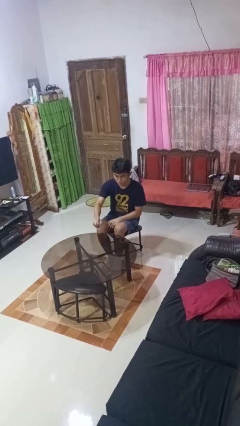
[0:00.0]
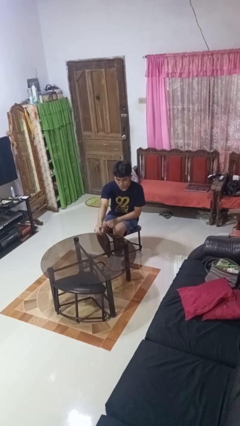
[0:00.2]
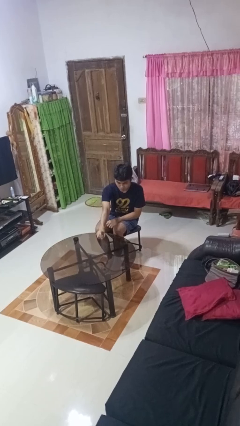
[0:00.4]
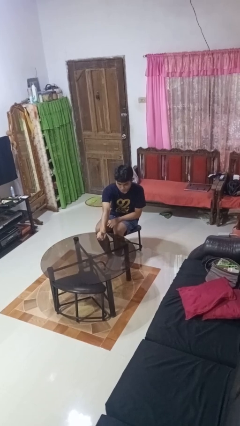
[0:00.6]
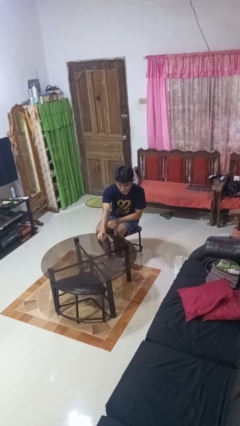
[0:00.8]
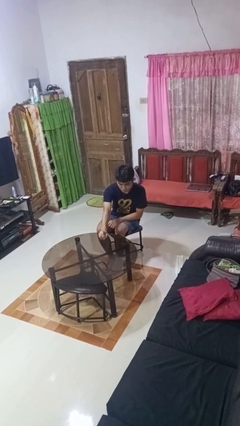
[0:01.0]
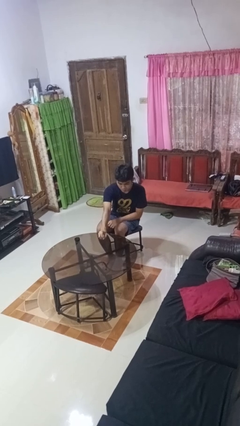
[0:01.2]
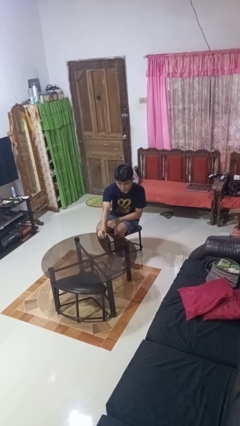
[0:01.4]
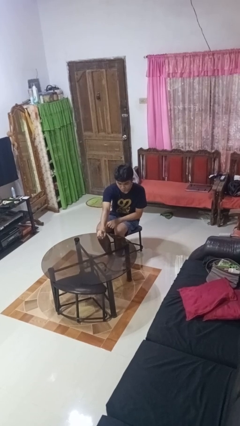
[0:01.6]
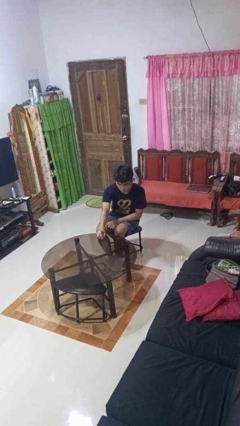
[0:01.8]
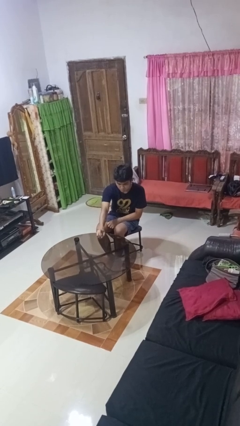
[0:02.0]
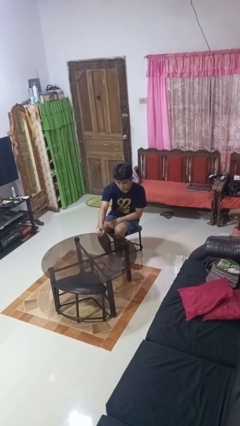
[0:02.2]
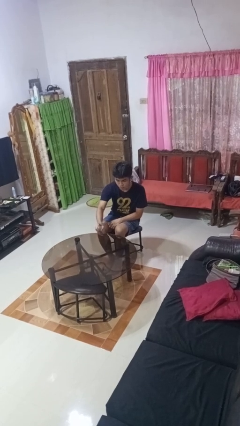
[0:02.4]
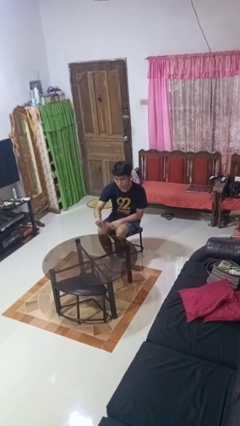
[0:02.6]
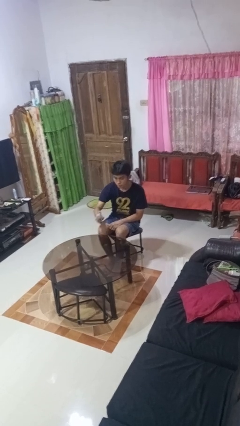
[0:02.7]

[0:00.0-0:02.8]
person sprays from bottle

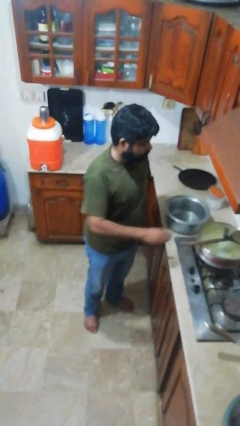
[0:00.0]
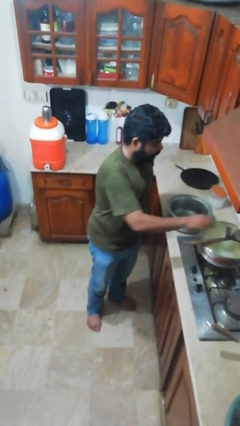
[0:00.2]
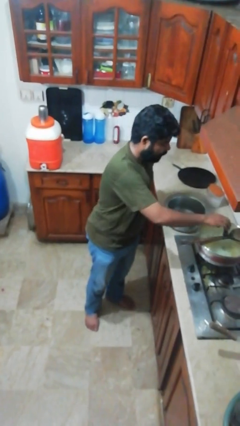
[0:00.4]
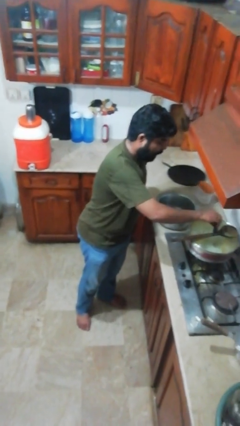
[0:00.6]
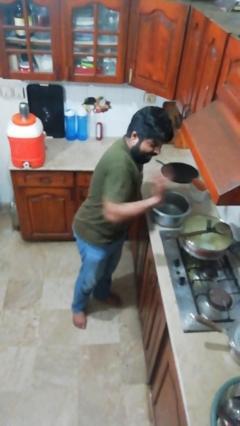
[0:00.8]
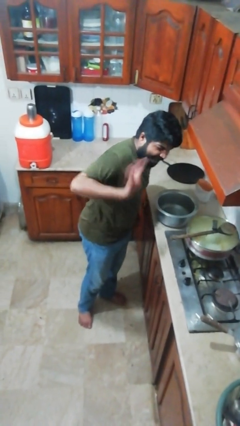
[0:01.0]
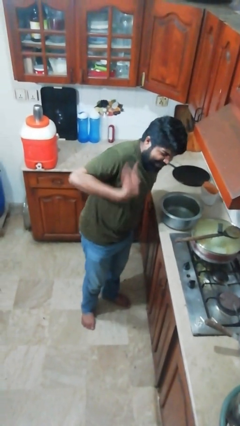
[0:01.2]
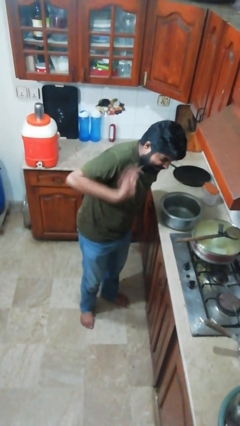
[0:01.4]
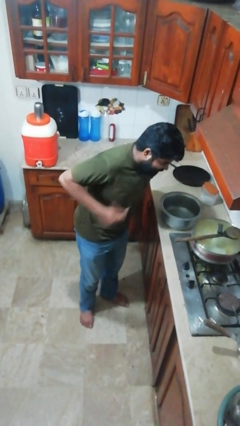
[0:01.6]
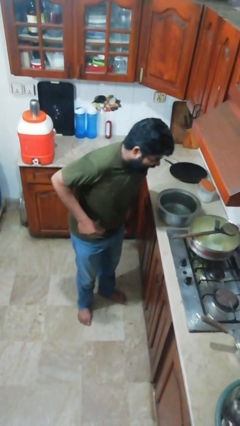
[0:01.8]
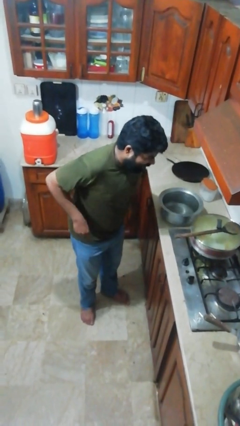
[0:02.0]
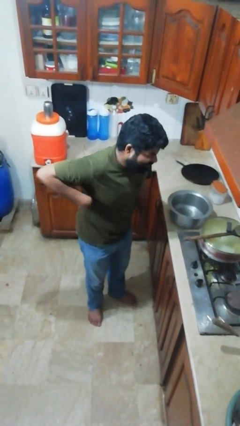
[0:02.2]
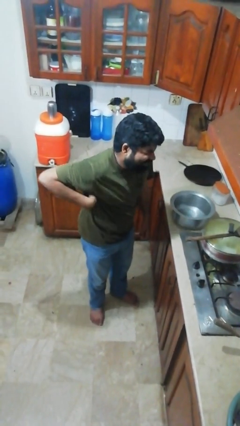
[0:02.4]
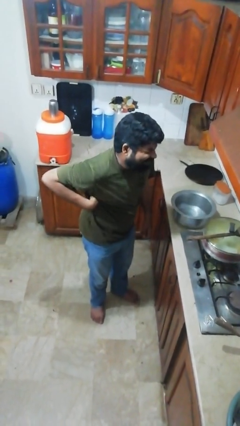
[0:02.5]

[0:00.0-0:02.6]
person burns hand

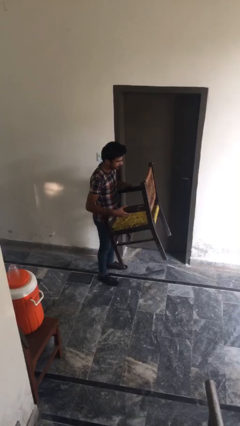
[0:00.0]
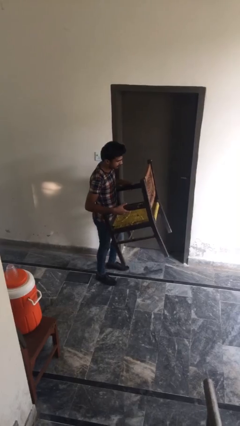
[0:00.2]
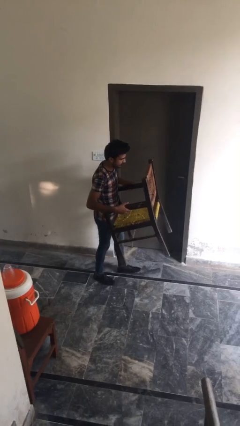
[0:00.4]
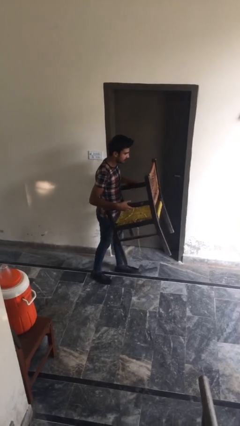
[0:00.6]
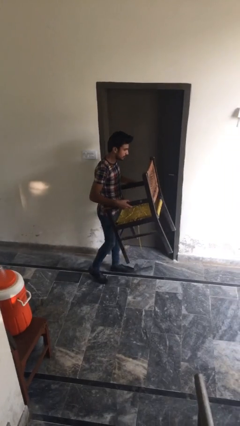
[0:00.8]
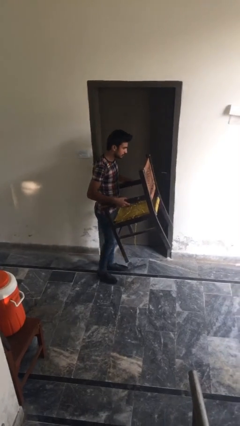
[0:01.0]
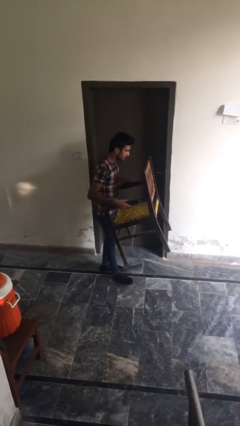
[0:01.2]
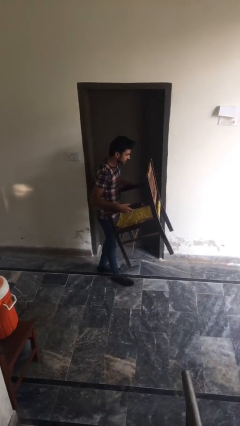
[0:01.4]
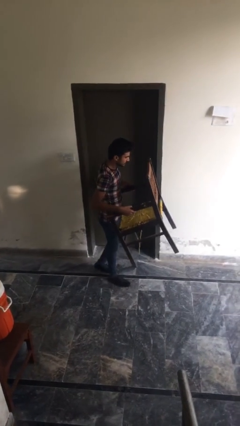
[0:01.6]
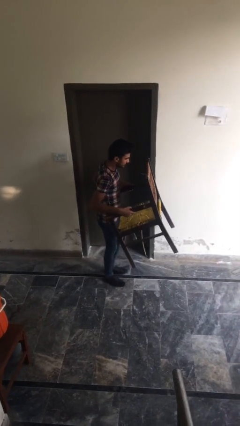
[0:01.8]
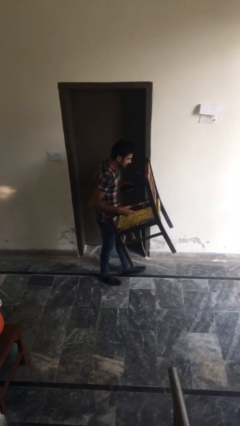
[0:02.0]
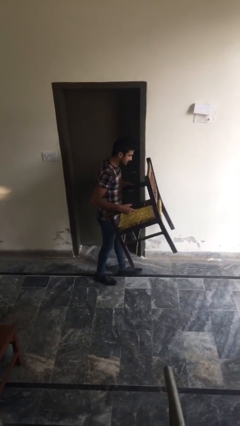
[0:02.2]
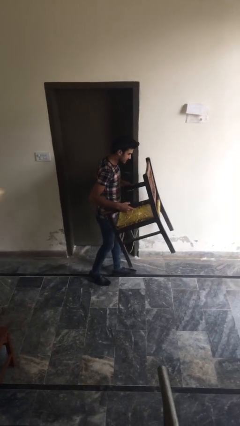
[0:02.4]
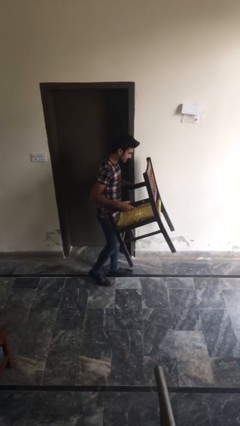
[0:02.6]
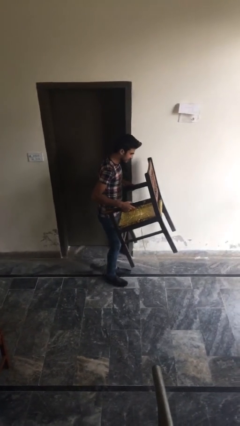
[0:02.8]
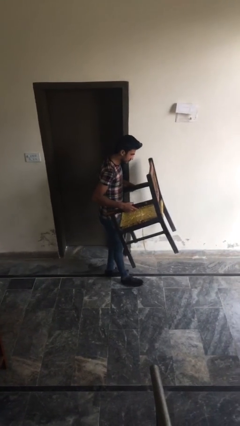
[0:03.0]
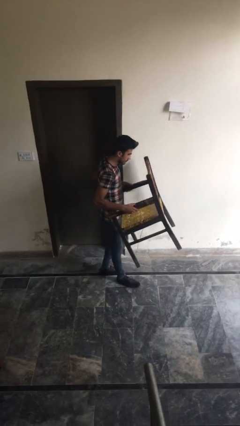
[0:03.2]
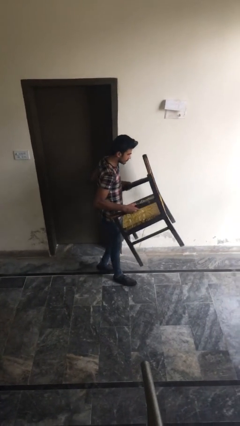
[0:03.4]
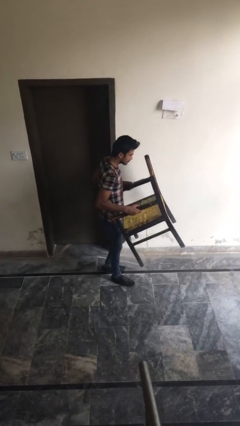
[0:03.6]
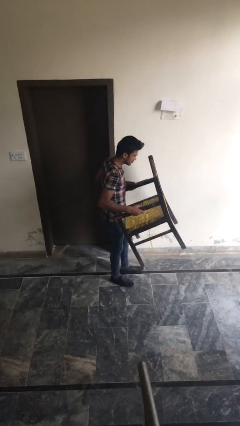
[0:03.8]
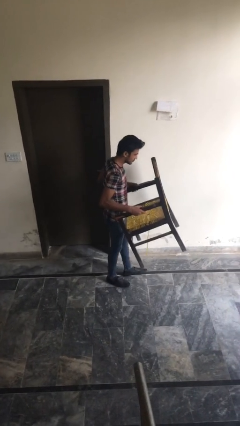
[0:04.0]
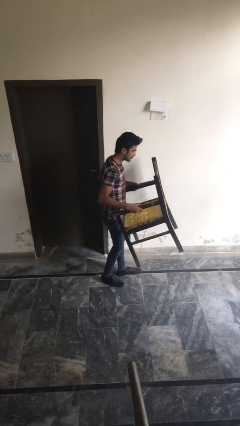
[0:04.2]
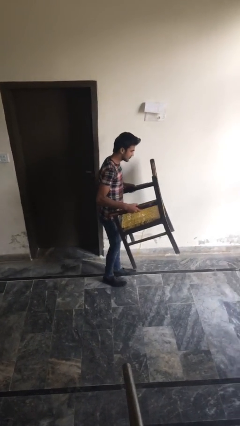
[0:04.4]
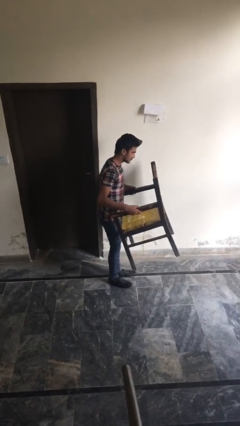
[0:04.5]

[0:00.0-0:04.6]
person carries heavy object

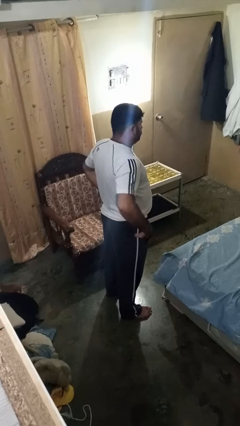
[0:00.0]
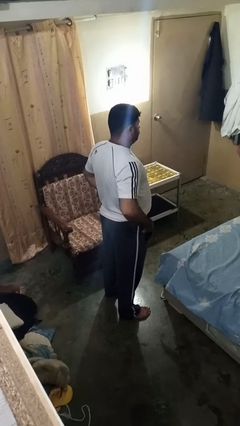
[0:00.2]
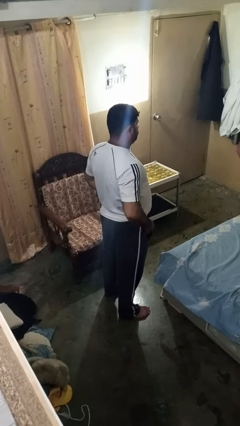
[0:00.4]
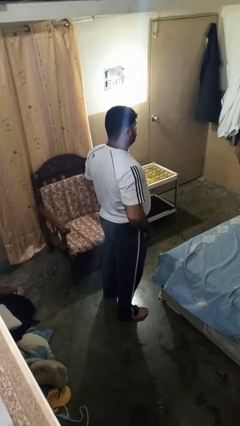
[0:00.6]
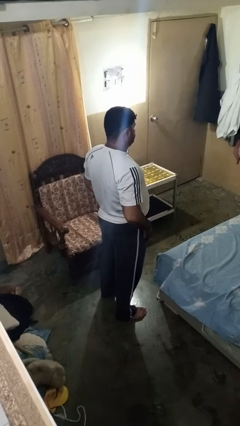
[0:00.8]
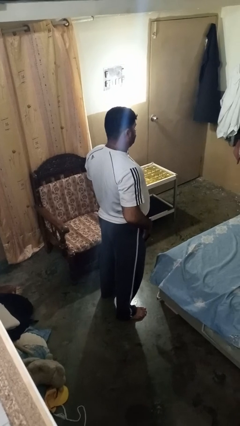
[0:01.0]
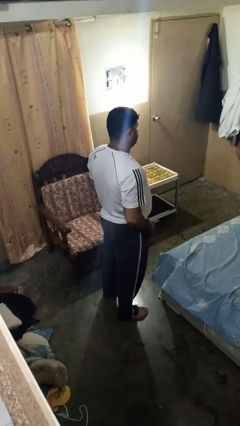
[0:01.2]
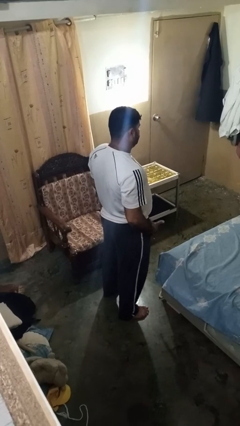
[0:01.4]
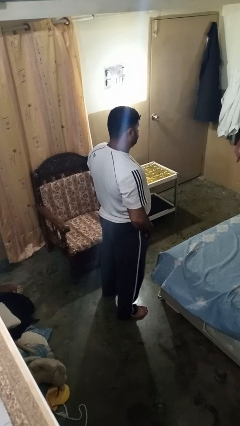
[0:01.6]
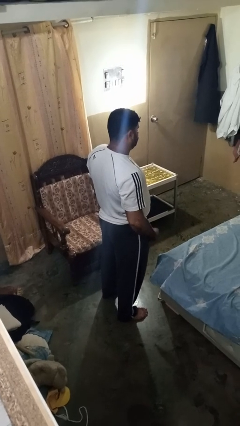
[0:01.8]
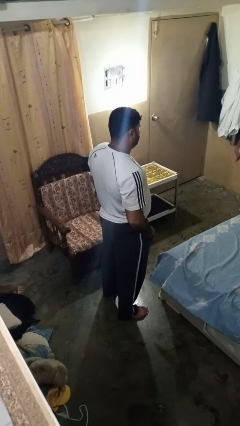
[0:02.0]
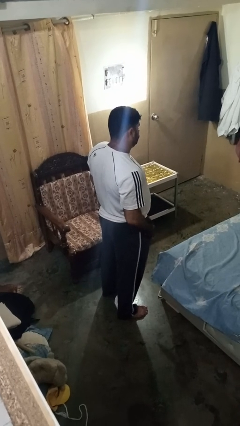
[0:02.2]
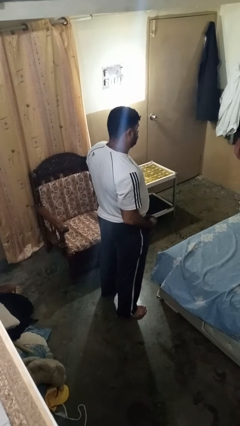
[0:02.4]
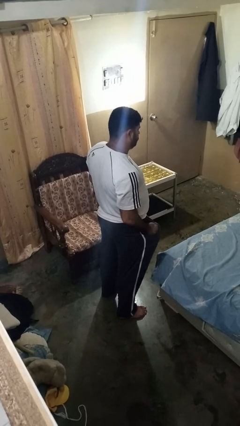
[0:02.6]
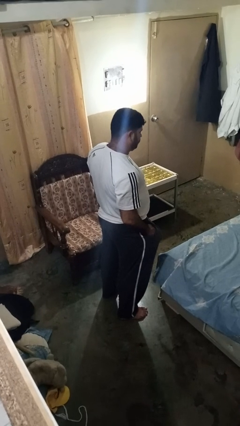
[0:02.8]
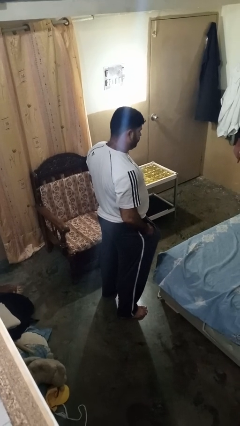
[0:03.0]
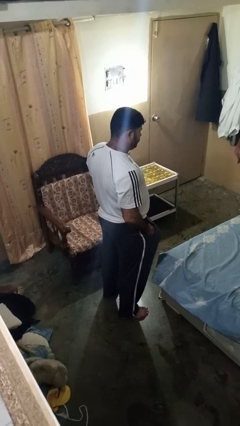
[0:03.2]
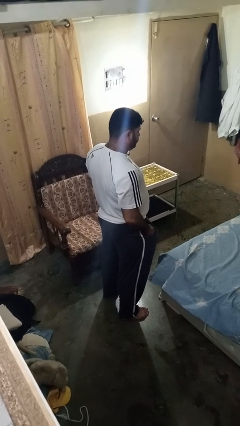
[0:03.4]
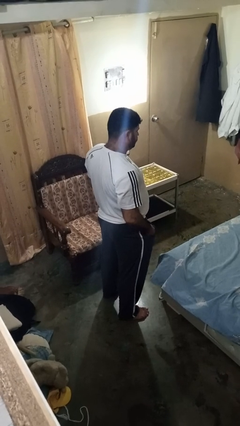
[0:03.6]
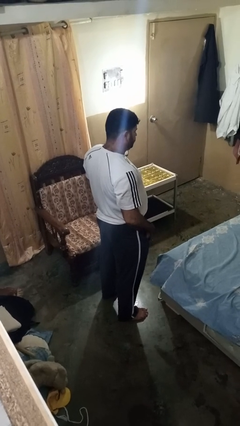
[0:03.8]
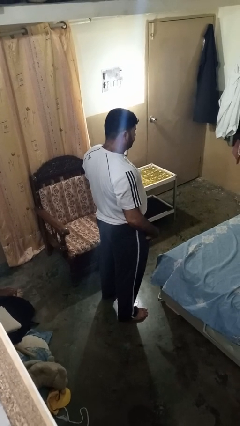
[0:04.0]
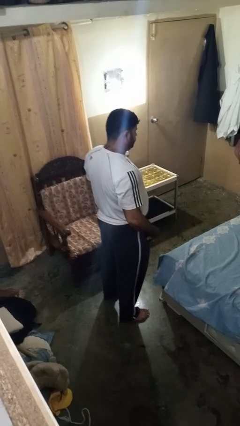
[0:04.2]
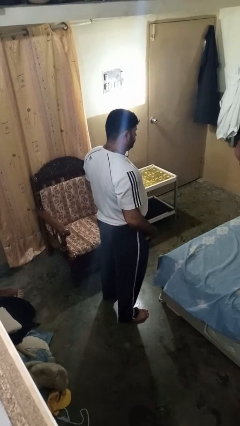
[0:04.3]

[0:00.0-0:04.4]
person puts hands in back pockets

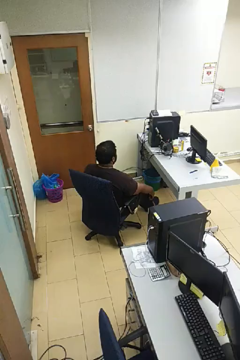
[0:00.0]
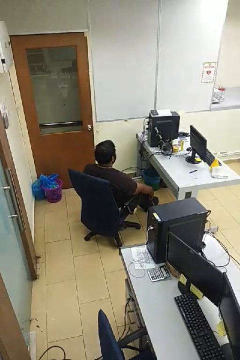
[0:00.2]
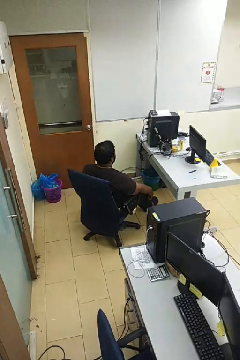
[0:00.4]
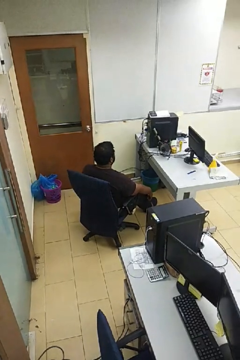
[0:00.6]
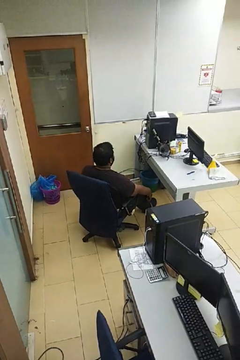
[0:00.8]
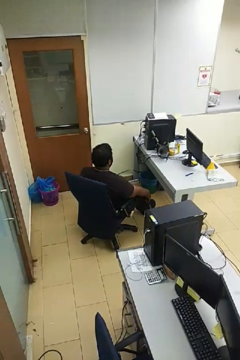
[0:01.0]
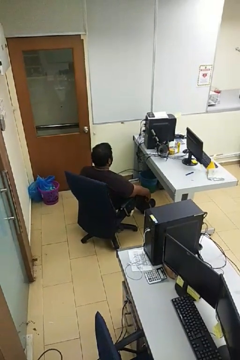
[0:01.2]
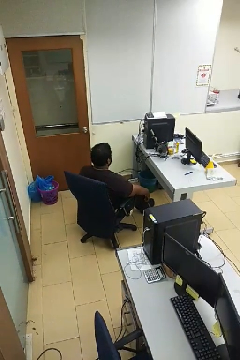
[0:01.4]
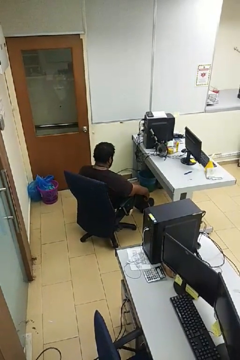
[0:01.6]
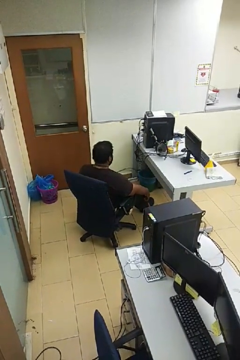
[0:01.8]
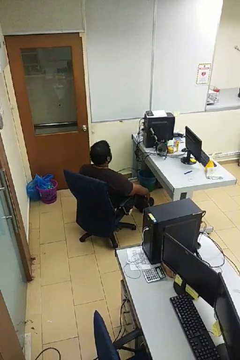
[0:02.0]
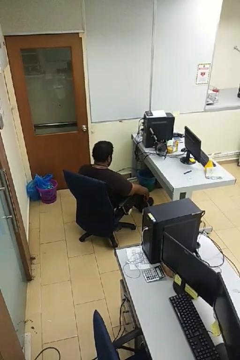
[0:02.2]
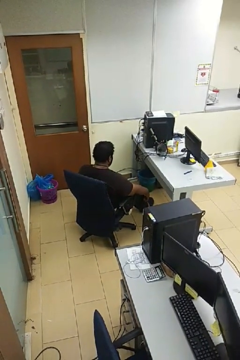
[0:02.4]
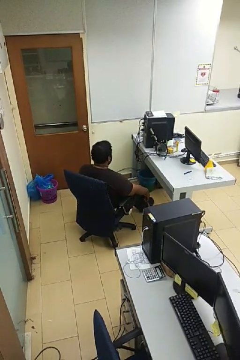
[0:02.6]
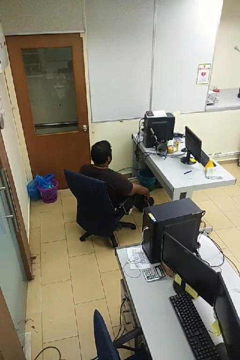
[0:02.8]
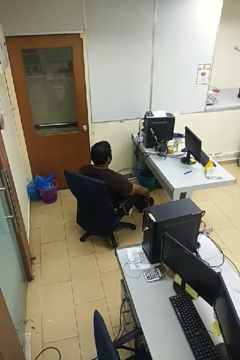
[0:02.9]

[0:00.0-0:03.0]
person nods head

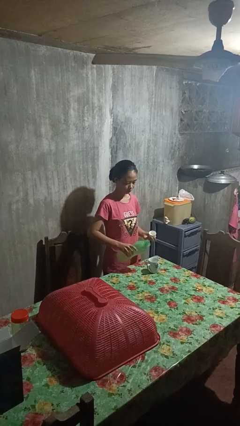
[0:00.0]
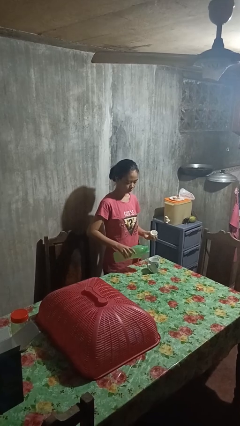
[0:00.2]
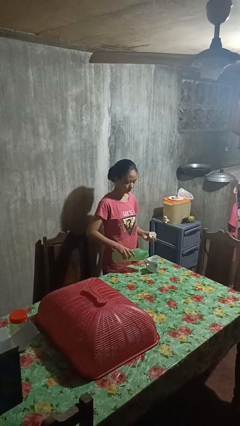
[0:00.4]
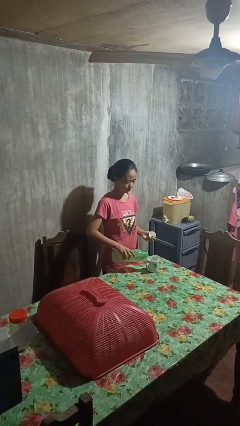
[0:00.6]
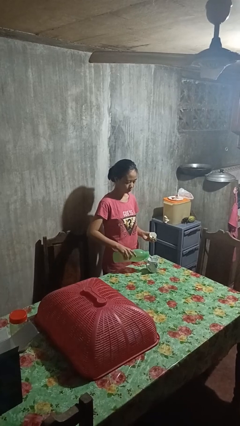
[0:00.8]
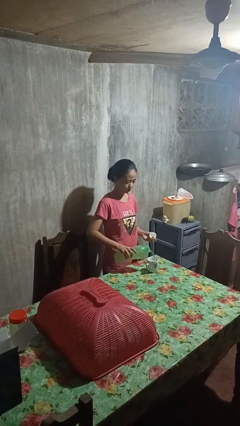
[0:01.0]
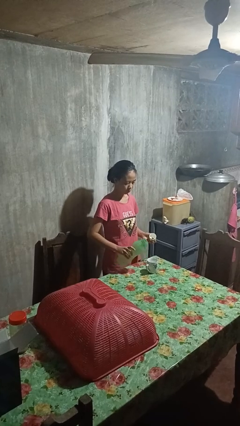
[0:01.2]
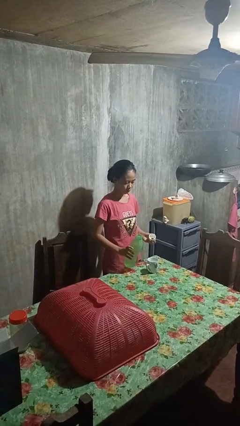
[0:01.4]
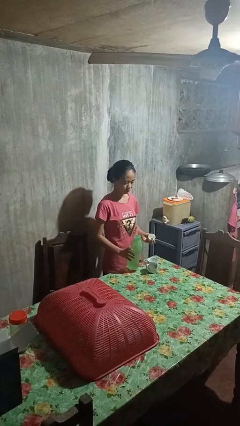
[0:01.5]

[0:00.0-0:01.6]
person pours liquid into cup
